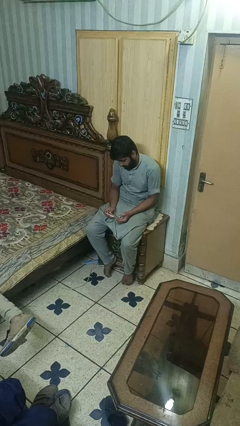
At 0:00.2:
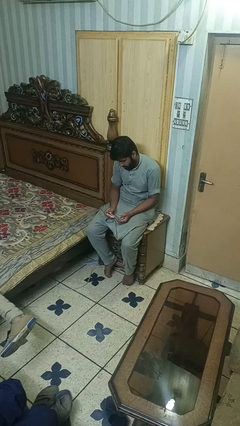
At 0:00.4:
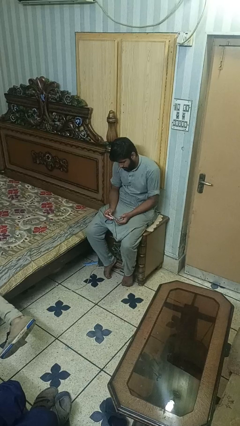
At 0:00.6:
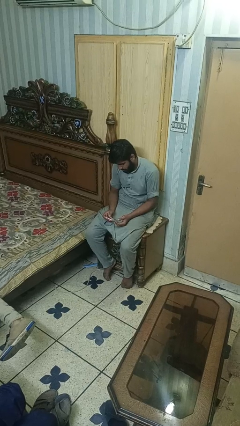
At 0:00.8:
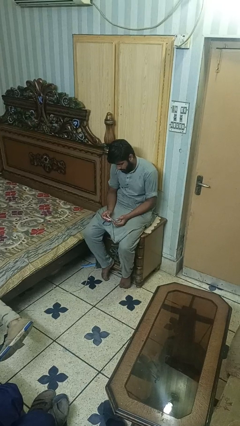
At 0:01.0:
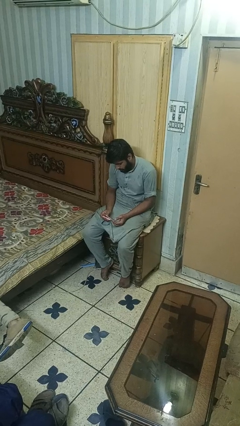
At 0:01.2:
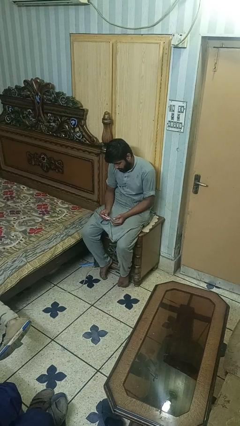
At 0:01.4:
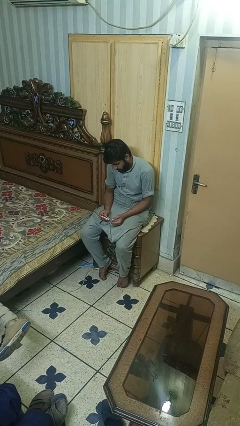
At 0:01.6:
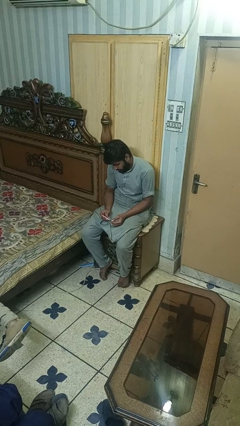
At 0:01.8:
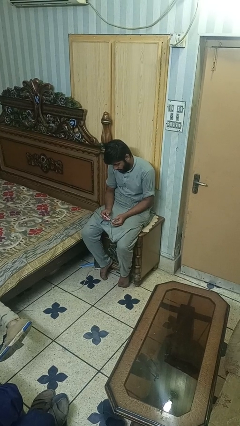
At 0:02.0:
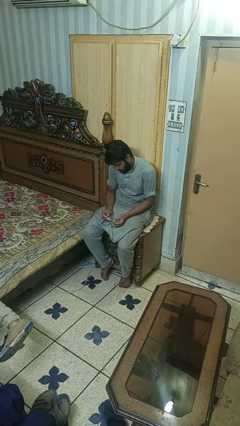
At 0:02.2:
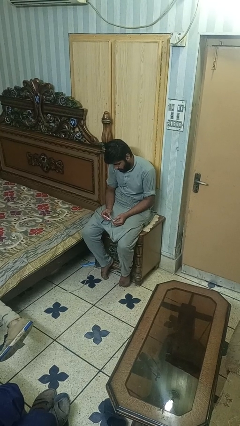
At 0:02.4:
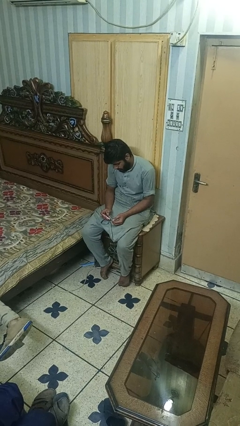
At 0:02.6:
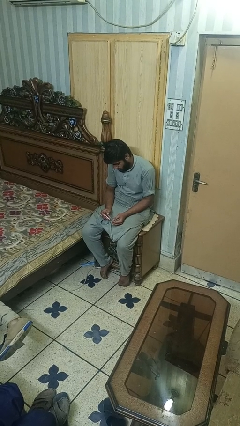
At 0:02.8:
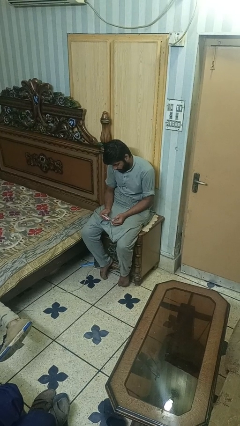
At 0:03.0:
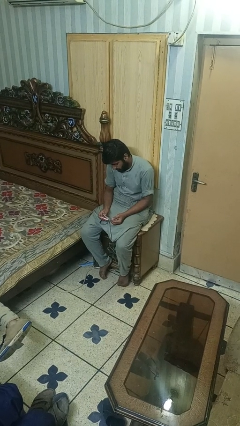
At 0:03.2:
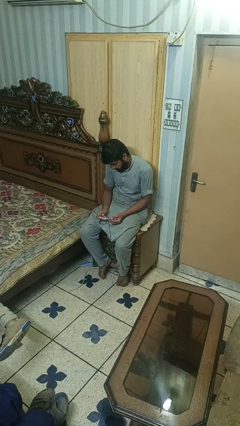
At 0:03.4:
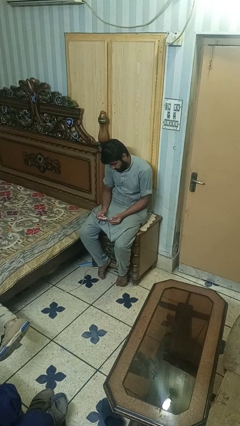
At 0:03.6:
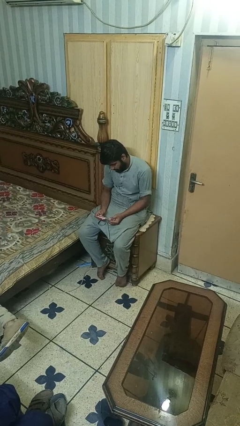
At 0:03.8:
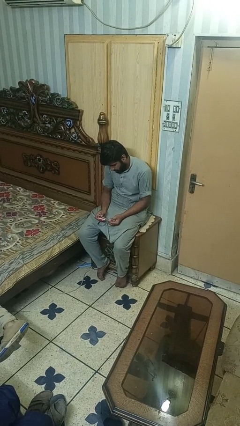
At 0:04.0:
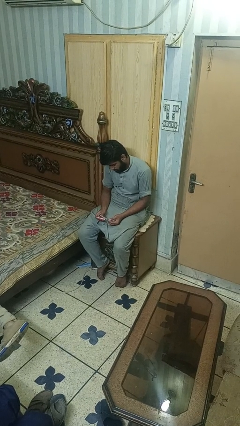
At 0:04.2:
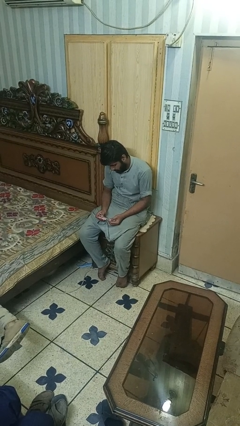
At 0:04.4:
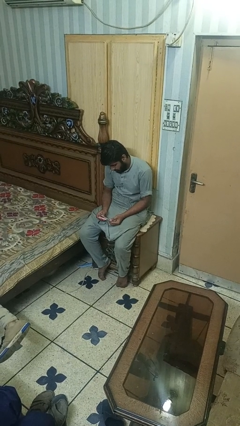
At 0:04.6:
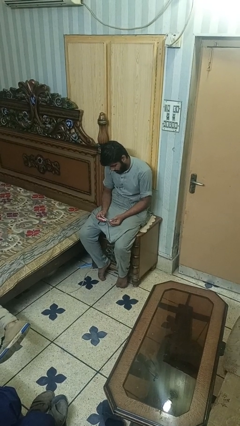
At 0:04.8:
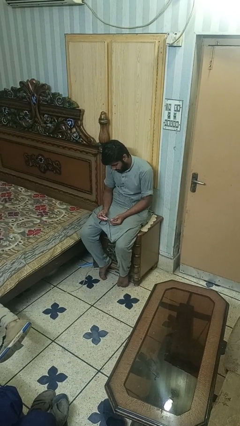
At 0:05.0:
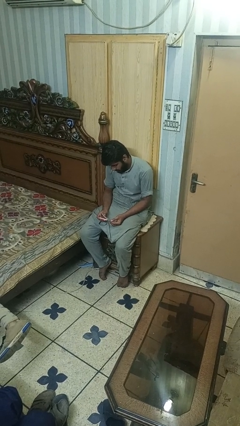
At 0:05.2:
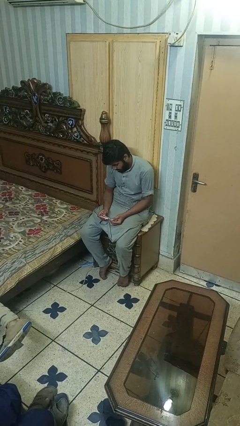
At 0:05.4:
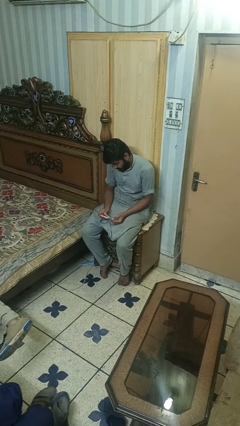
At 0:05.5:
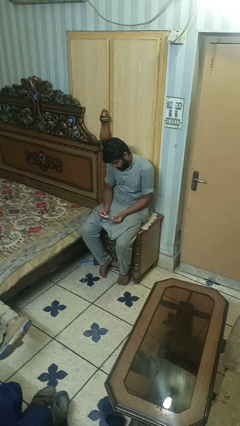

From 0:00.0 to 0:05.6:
person clips fingernails

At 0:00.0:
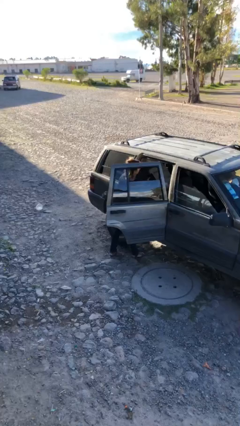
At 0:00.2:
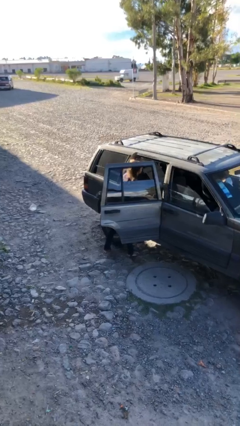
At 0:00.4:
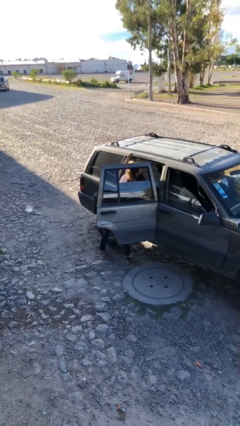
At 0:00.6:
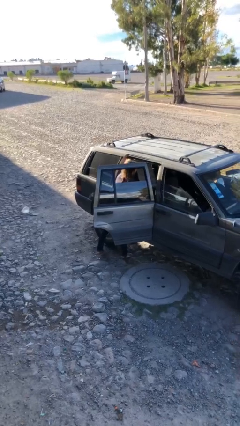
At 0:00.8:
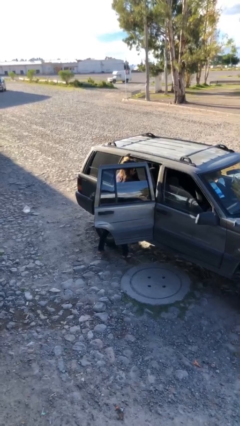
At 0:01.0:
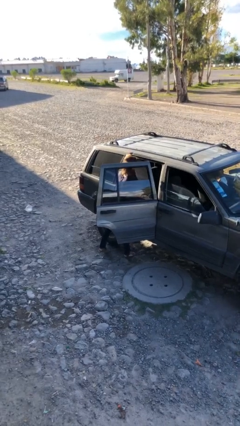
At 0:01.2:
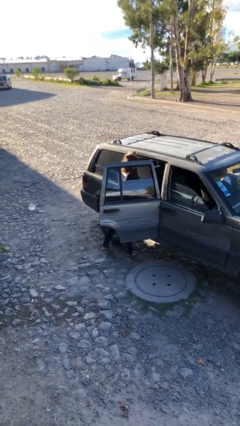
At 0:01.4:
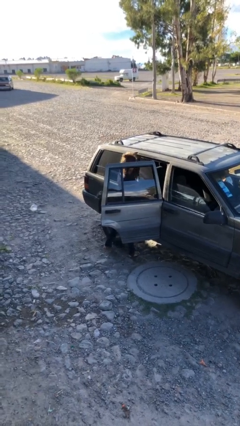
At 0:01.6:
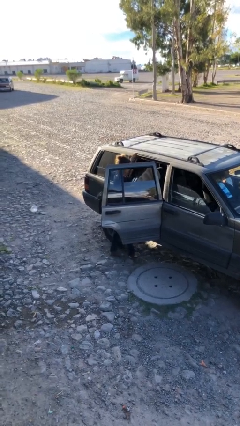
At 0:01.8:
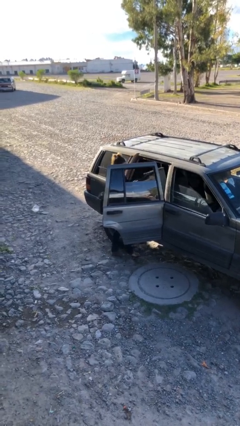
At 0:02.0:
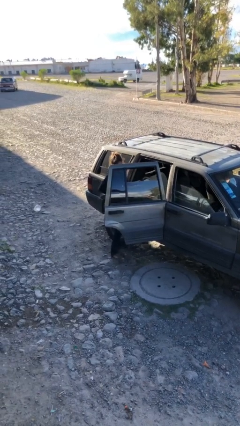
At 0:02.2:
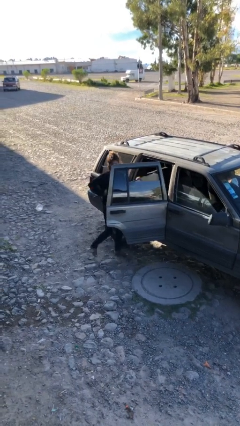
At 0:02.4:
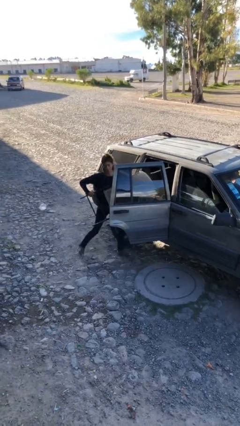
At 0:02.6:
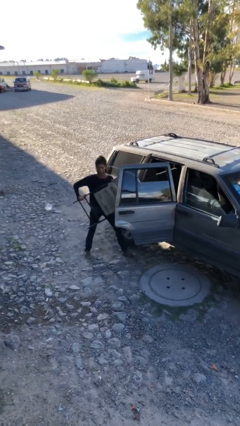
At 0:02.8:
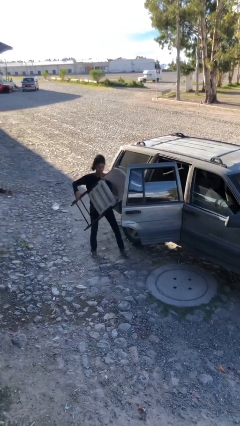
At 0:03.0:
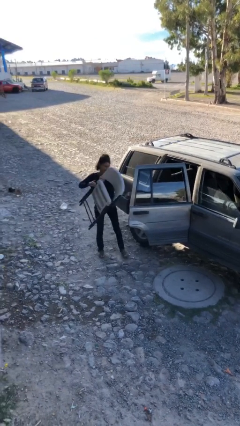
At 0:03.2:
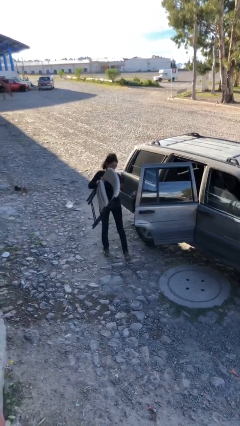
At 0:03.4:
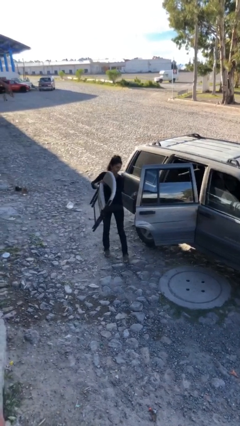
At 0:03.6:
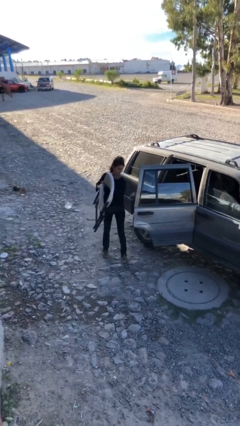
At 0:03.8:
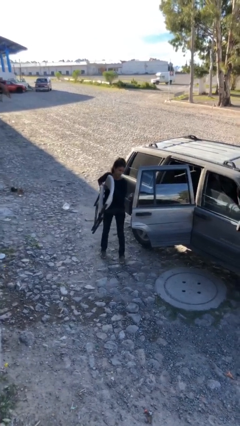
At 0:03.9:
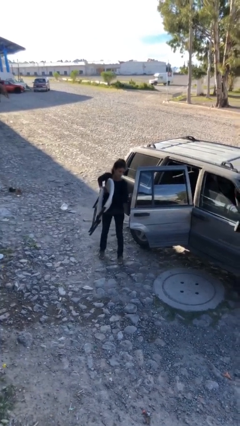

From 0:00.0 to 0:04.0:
person unloads car

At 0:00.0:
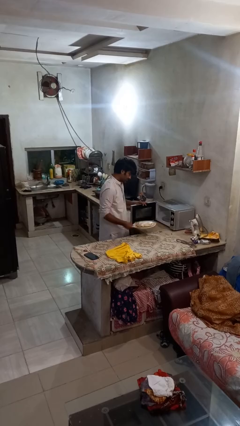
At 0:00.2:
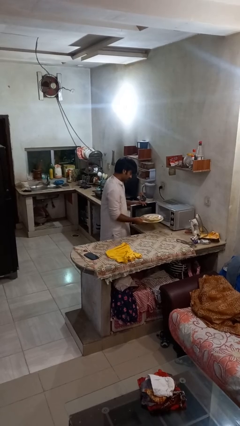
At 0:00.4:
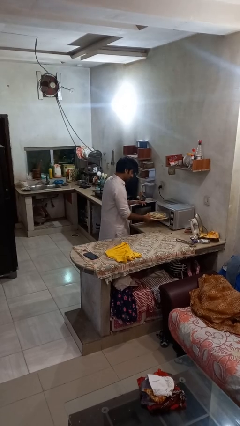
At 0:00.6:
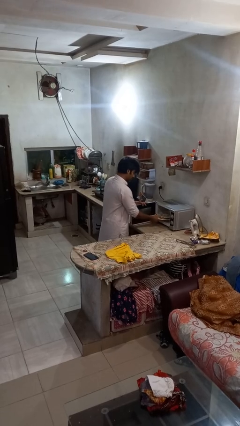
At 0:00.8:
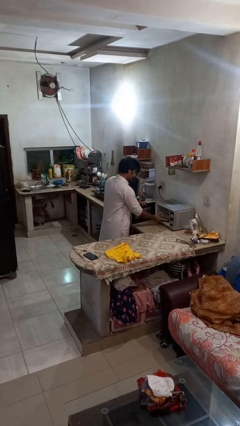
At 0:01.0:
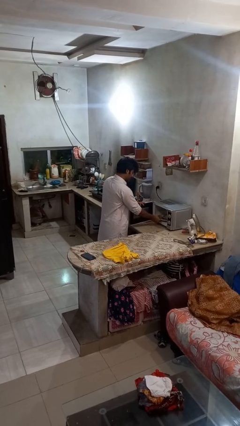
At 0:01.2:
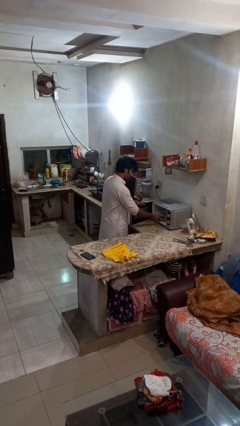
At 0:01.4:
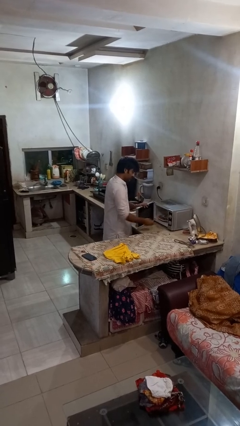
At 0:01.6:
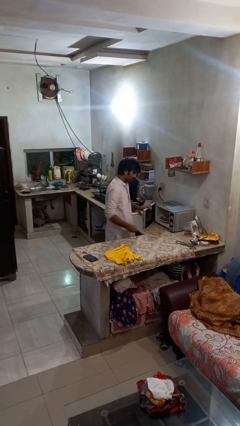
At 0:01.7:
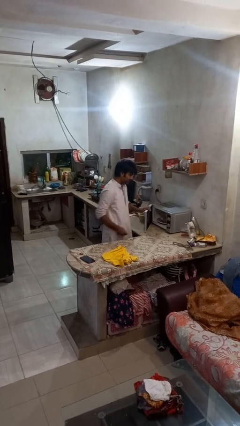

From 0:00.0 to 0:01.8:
person puts object into microwave

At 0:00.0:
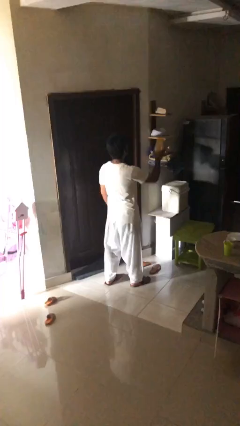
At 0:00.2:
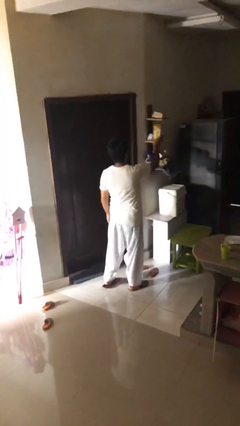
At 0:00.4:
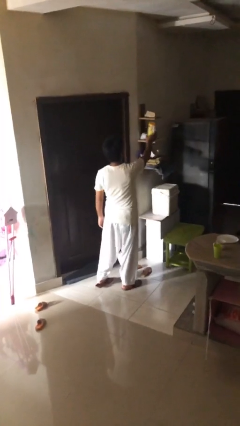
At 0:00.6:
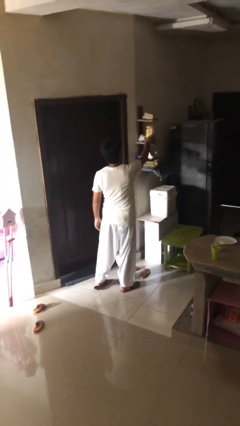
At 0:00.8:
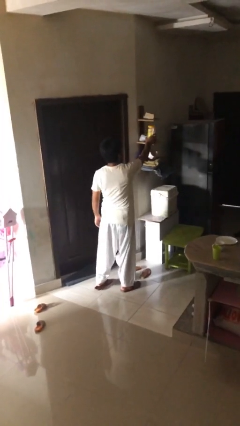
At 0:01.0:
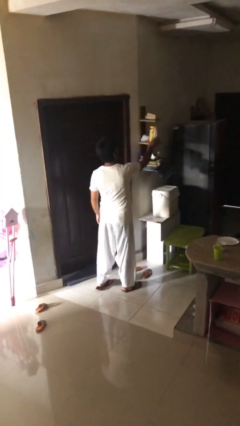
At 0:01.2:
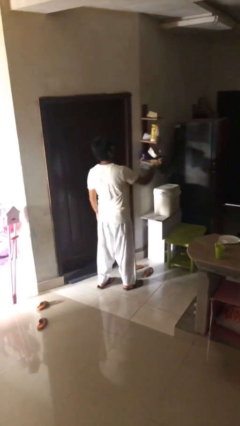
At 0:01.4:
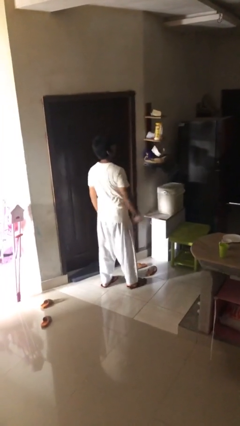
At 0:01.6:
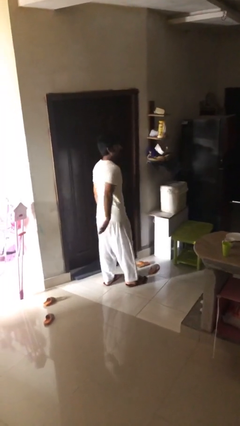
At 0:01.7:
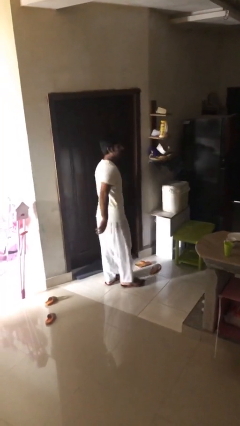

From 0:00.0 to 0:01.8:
person puts down object on shelf

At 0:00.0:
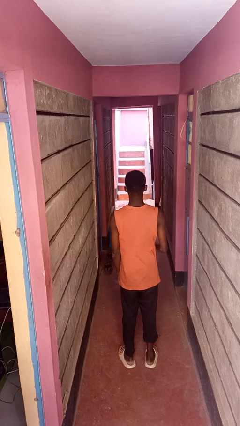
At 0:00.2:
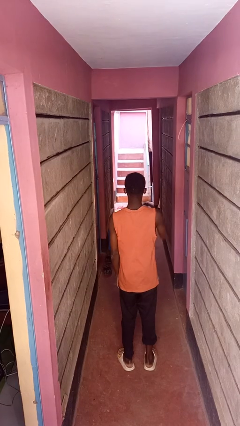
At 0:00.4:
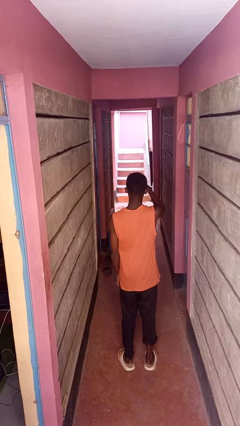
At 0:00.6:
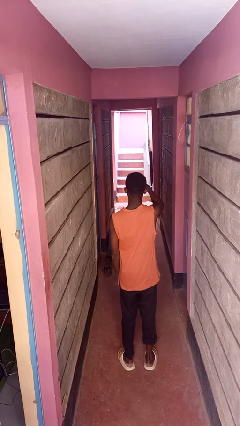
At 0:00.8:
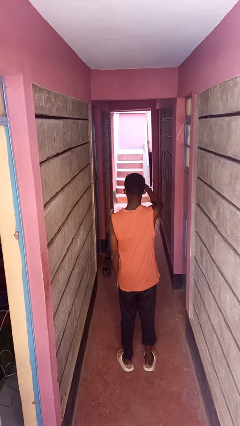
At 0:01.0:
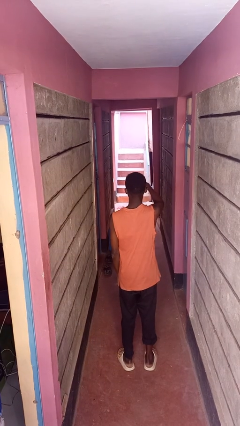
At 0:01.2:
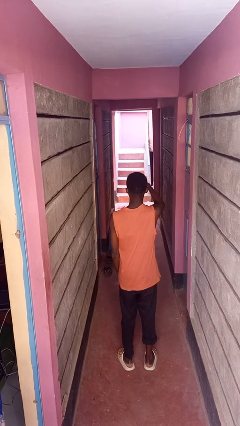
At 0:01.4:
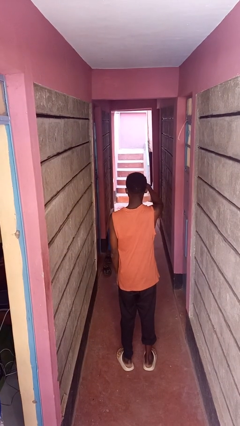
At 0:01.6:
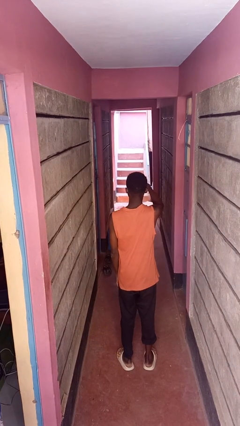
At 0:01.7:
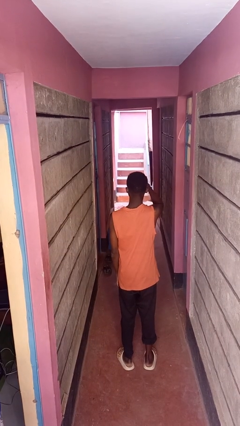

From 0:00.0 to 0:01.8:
person rubs eyes

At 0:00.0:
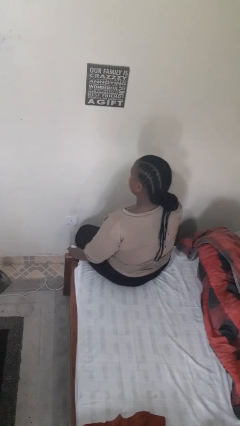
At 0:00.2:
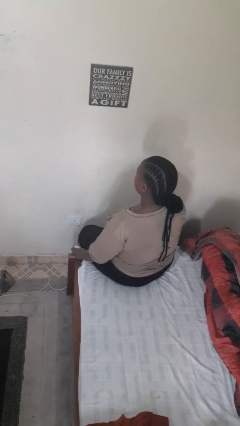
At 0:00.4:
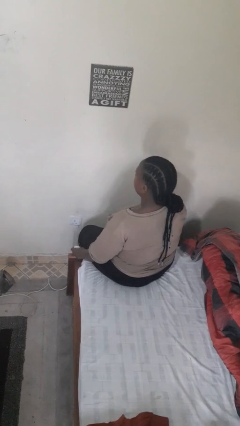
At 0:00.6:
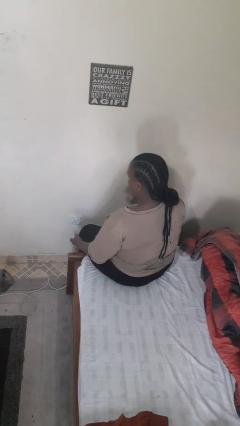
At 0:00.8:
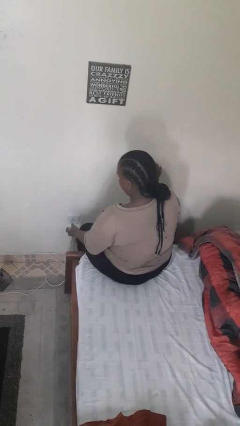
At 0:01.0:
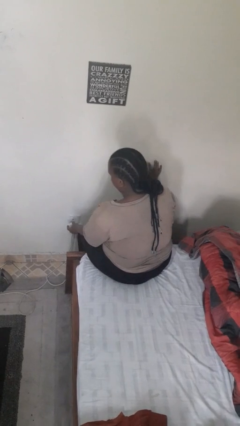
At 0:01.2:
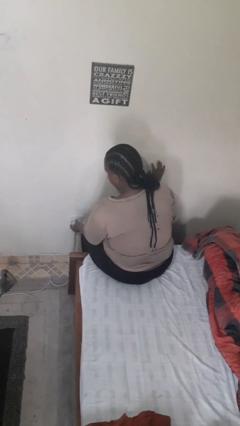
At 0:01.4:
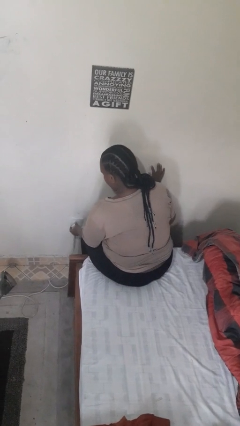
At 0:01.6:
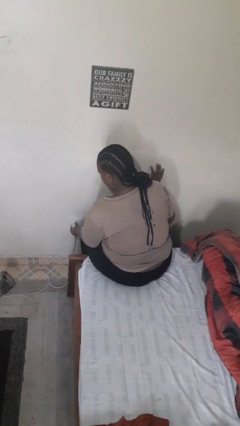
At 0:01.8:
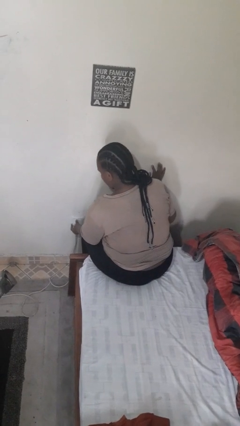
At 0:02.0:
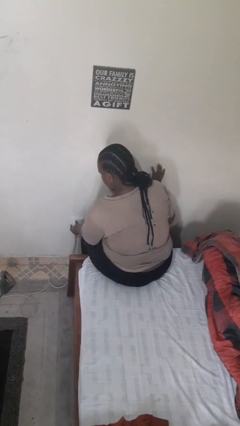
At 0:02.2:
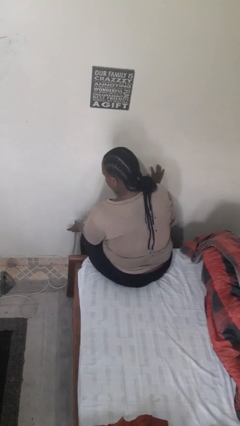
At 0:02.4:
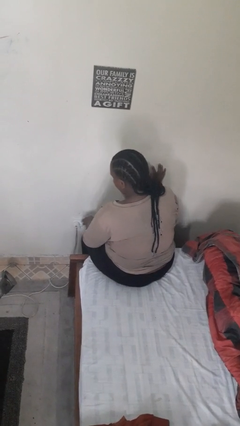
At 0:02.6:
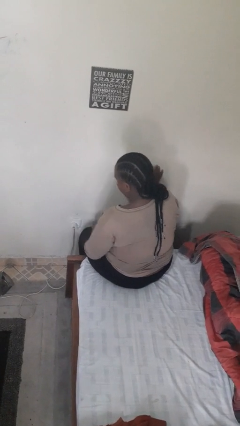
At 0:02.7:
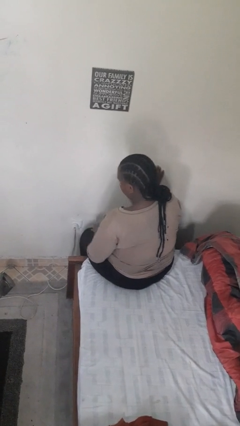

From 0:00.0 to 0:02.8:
person plugs into electrical socket
